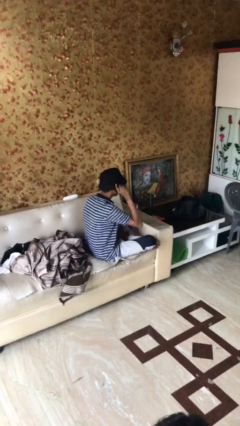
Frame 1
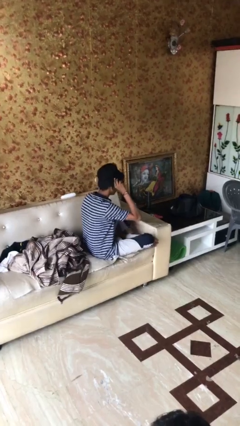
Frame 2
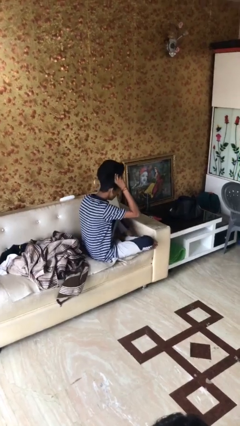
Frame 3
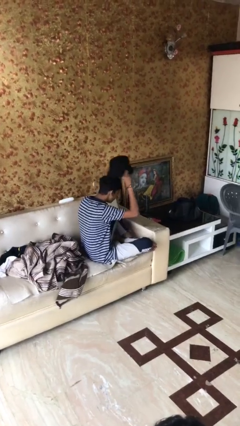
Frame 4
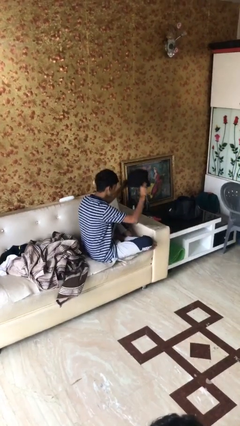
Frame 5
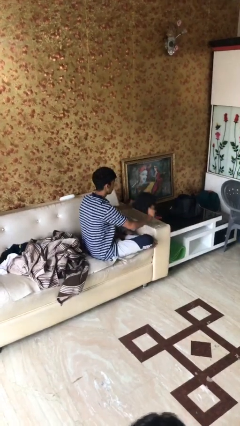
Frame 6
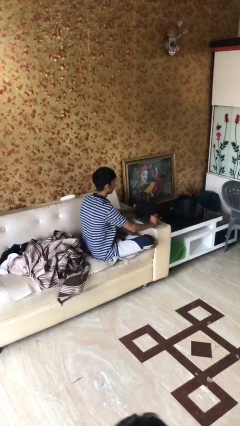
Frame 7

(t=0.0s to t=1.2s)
person takes off hat

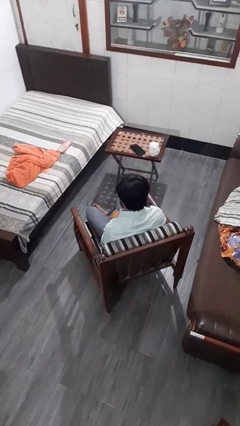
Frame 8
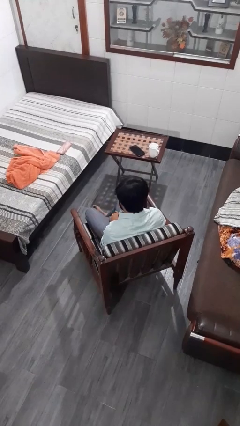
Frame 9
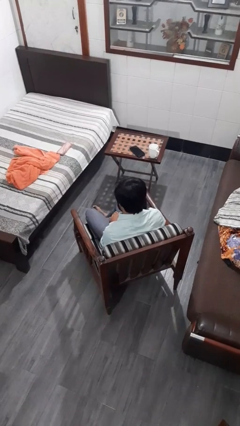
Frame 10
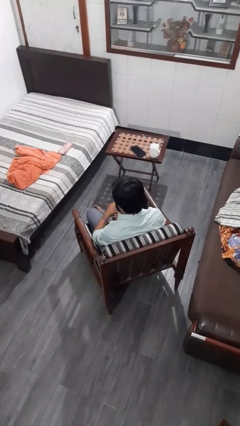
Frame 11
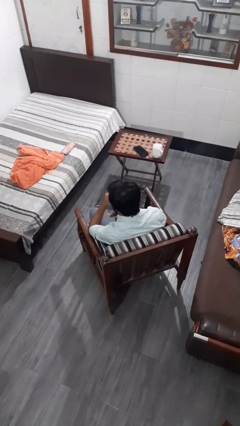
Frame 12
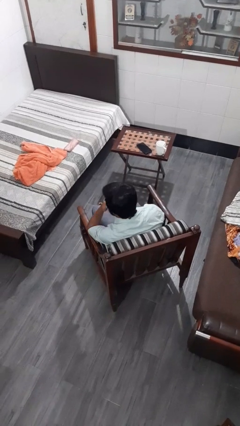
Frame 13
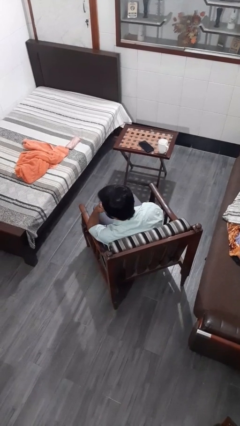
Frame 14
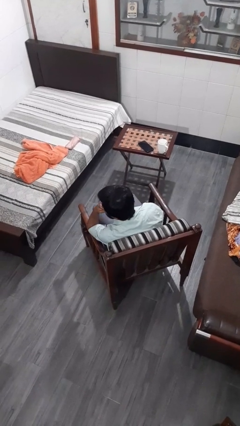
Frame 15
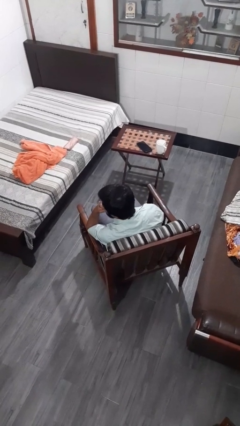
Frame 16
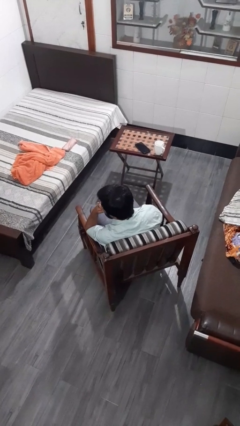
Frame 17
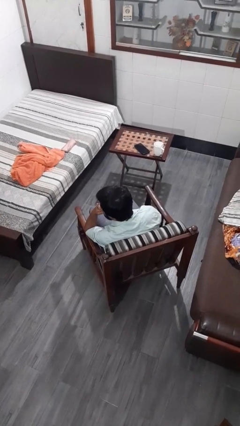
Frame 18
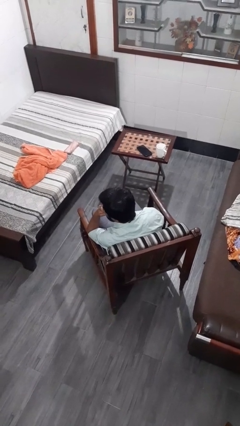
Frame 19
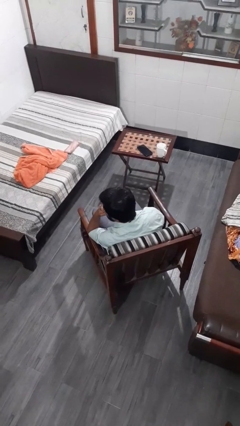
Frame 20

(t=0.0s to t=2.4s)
person strokes chin

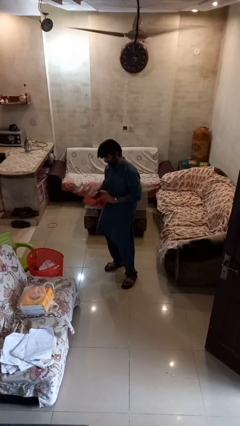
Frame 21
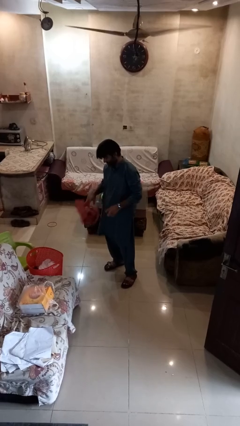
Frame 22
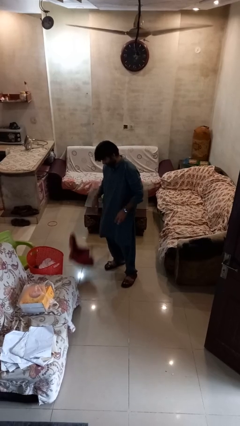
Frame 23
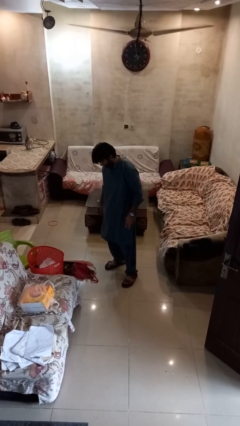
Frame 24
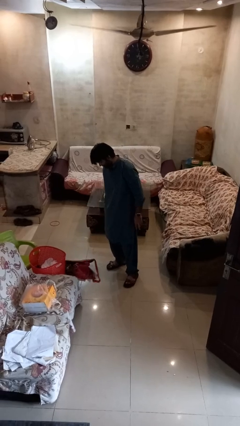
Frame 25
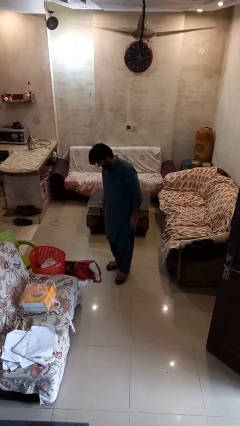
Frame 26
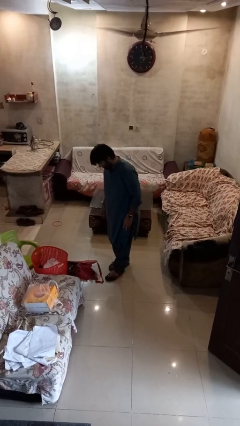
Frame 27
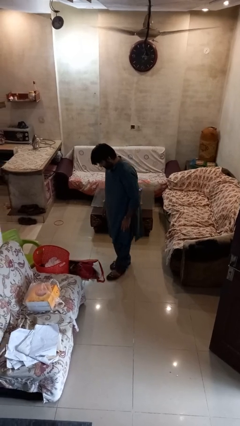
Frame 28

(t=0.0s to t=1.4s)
person drops object

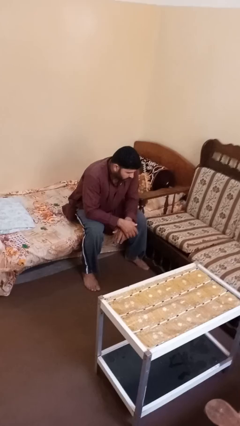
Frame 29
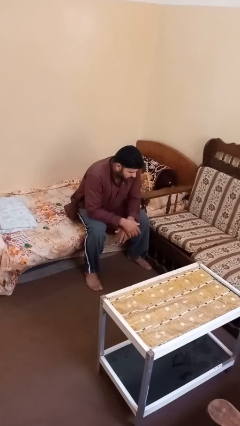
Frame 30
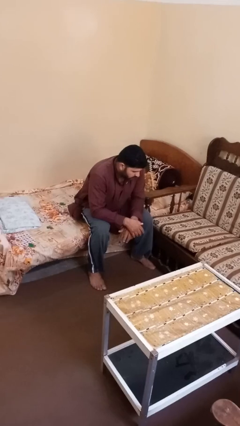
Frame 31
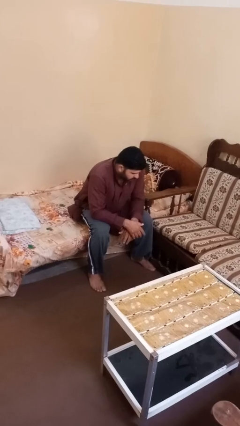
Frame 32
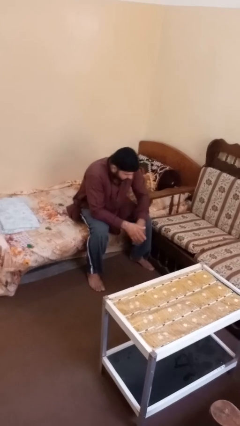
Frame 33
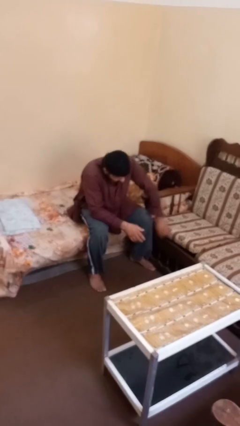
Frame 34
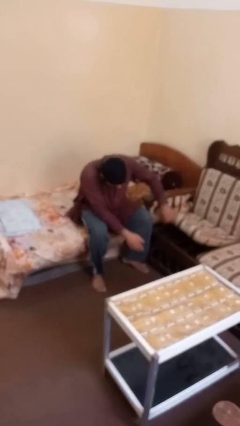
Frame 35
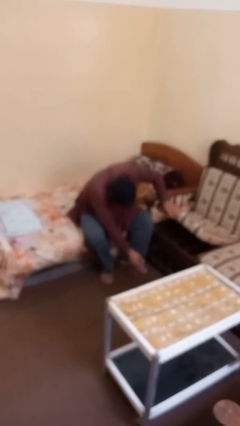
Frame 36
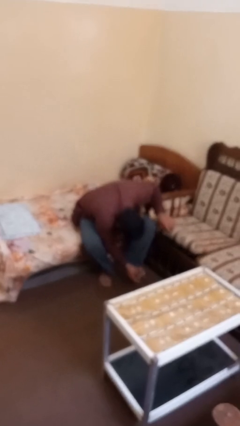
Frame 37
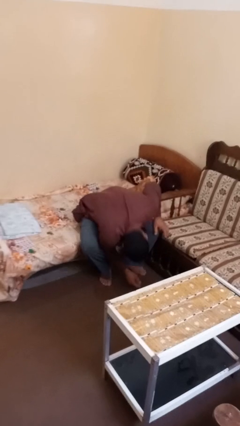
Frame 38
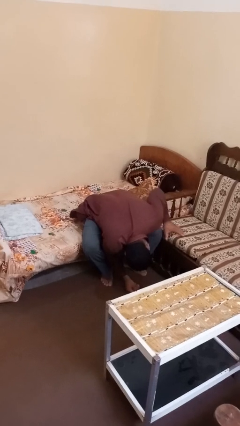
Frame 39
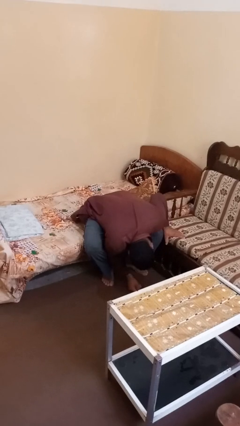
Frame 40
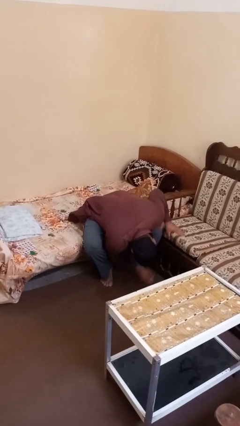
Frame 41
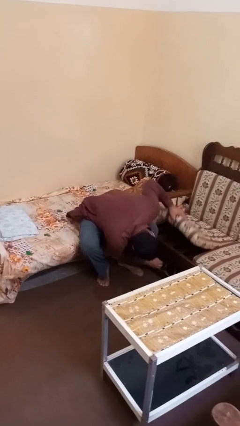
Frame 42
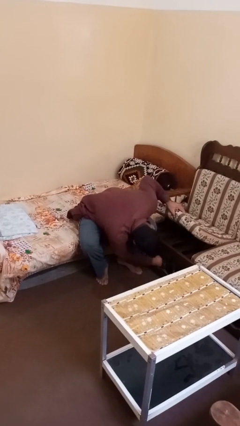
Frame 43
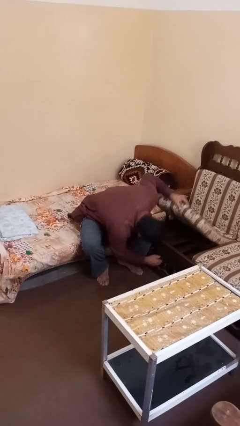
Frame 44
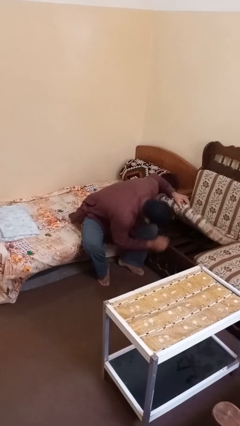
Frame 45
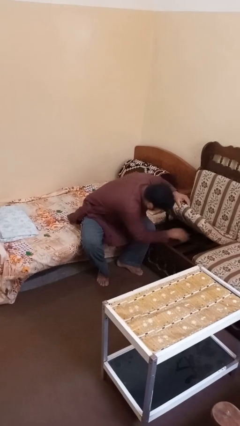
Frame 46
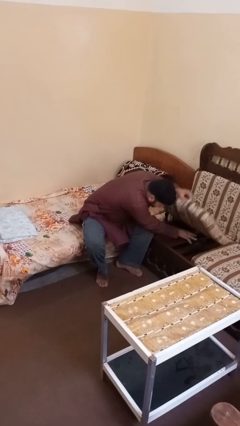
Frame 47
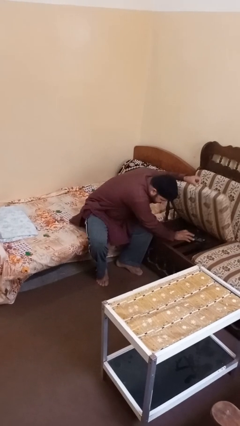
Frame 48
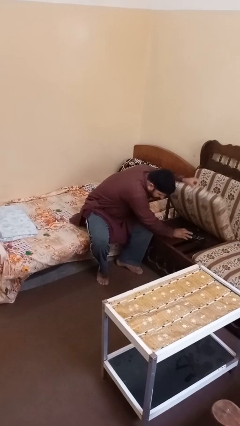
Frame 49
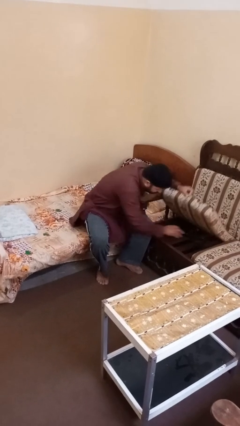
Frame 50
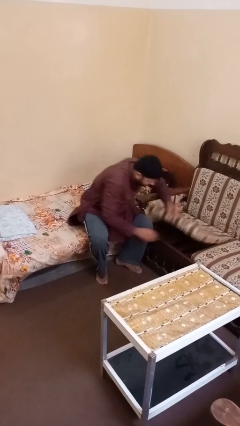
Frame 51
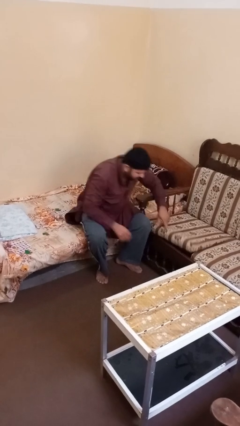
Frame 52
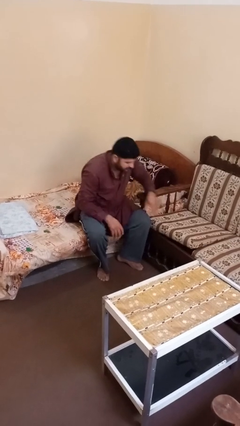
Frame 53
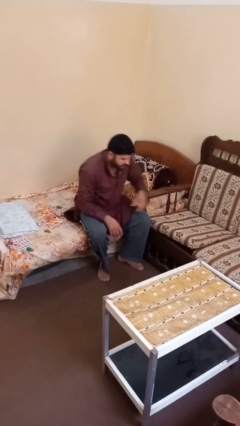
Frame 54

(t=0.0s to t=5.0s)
person searches under couch

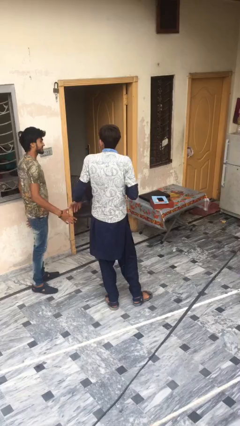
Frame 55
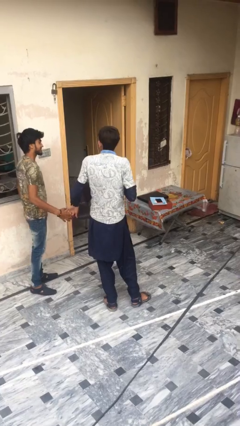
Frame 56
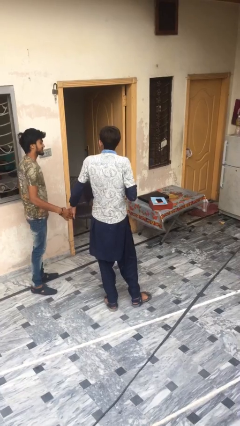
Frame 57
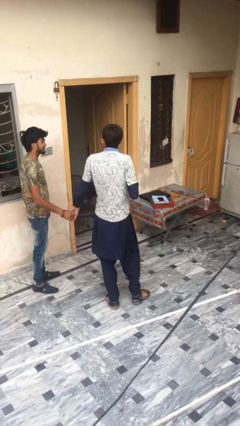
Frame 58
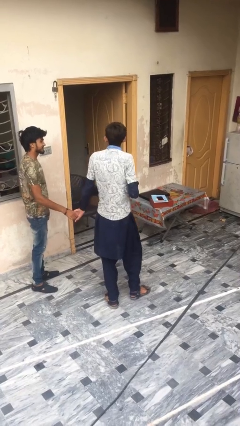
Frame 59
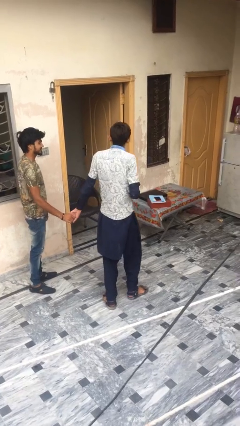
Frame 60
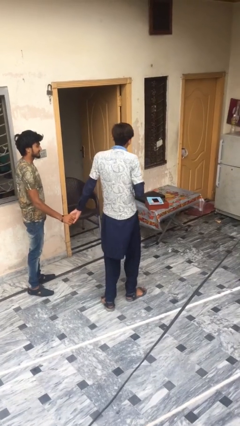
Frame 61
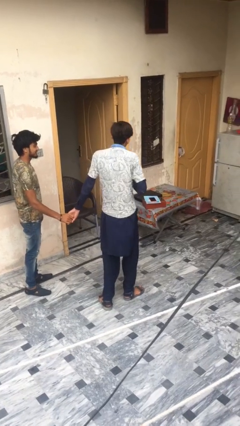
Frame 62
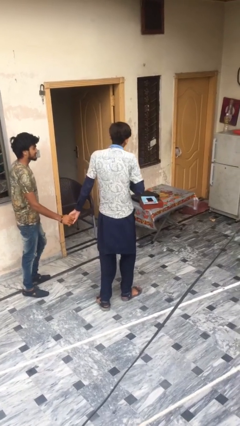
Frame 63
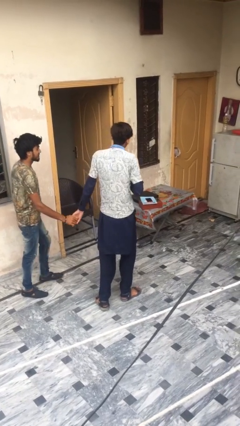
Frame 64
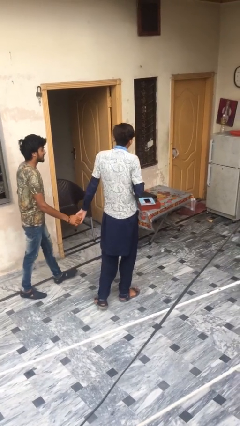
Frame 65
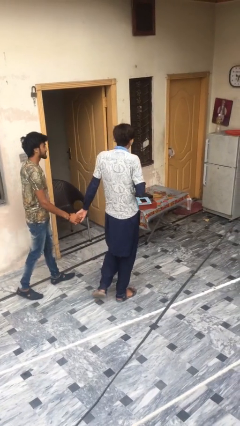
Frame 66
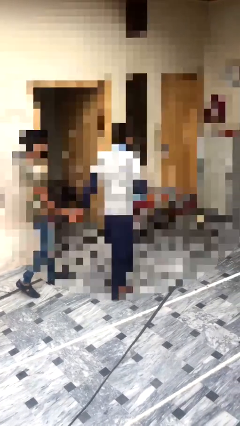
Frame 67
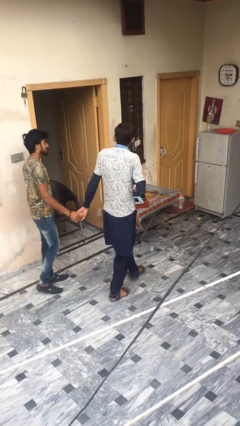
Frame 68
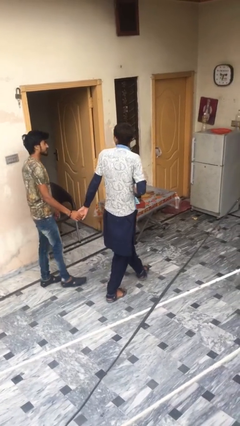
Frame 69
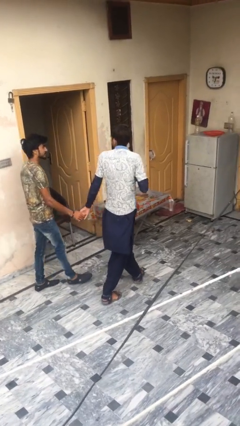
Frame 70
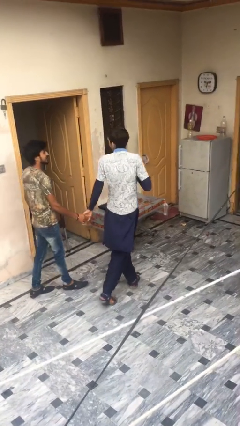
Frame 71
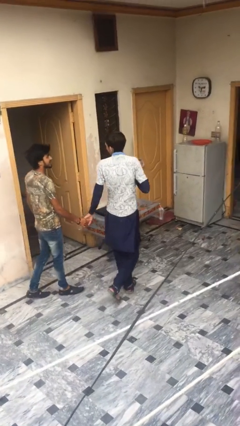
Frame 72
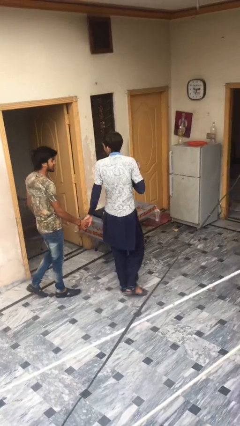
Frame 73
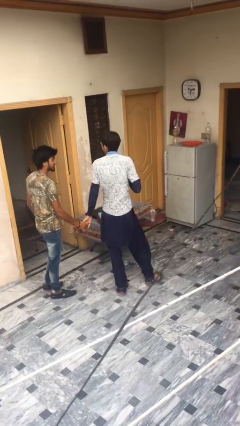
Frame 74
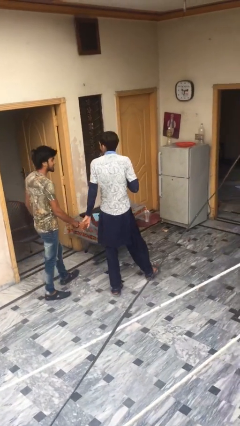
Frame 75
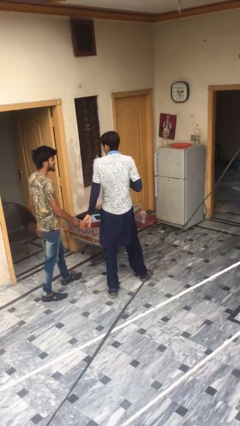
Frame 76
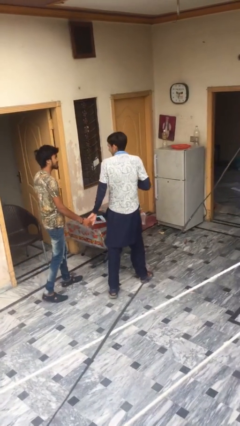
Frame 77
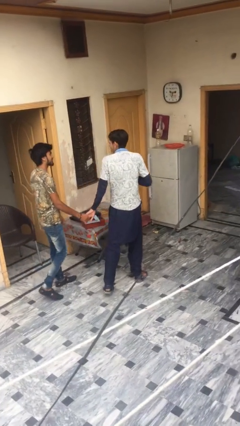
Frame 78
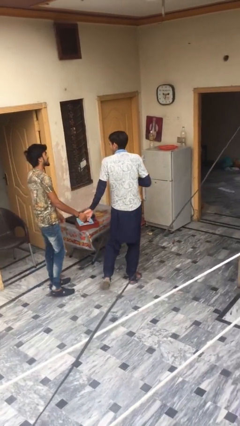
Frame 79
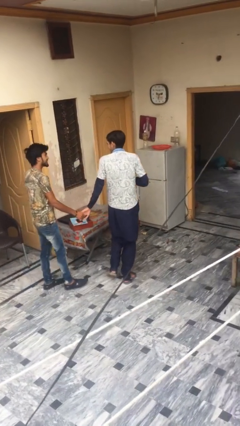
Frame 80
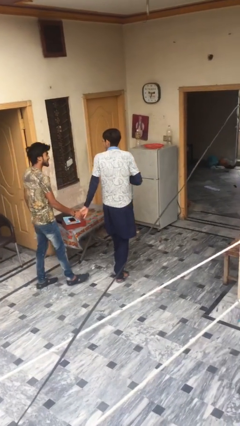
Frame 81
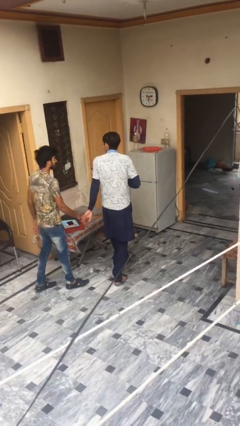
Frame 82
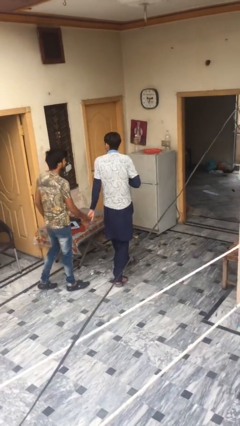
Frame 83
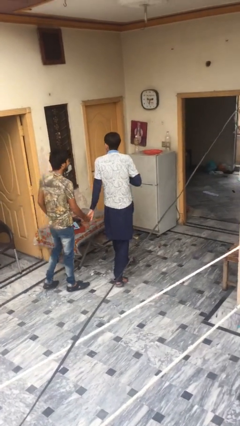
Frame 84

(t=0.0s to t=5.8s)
person holds hand

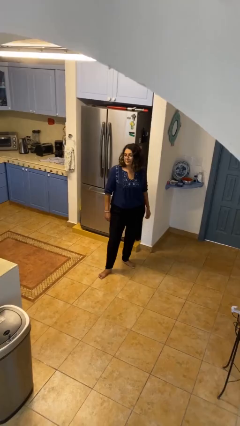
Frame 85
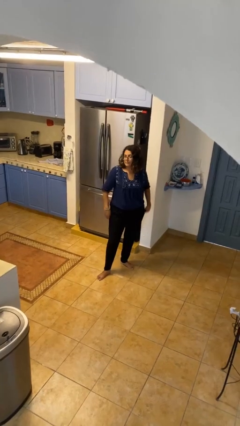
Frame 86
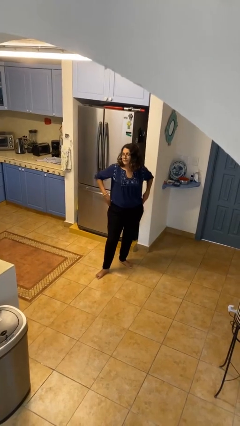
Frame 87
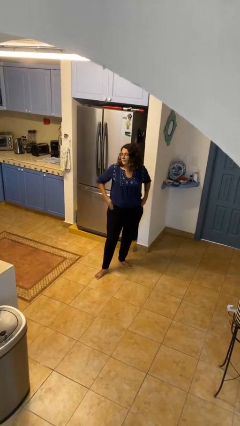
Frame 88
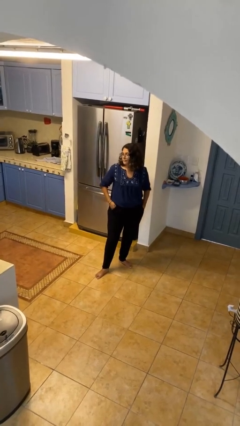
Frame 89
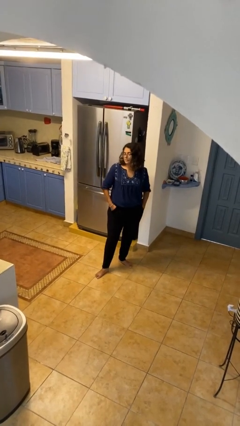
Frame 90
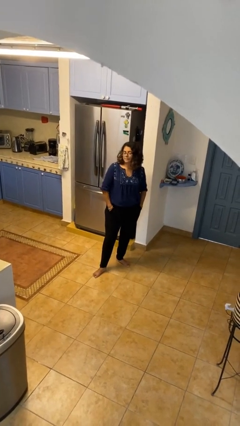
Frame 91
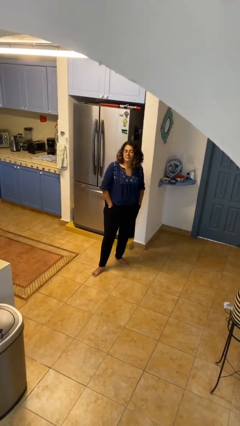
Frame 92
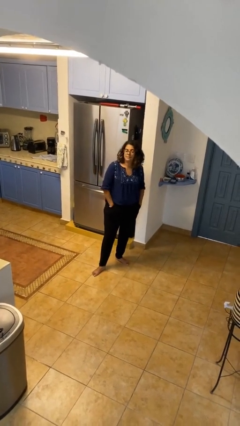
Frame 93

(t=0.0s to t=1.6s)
person puts hands in back pockets

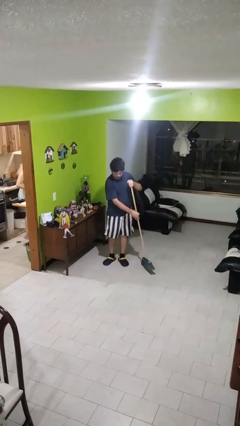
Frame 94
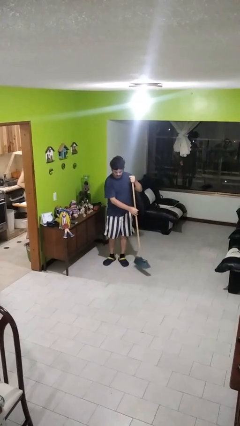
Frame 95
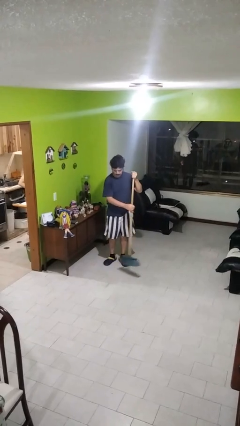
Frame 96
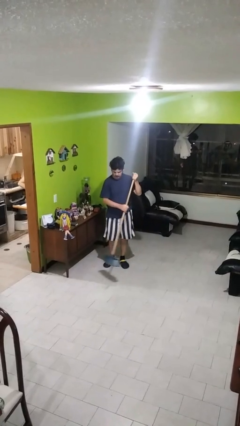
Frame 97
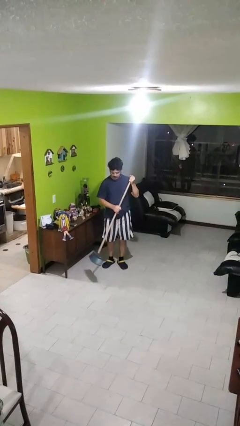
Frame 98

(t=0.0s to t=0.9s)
person sweeps floor
